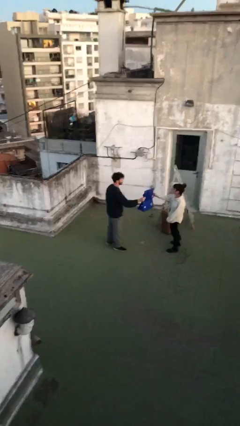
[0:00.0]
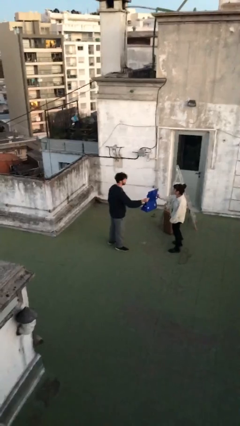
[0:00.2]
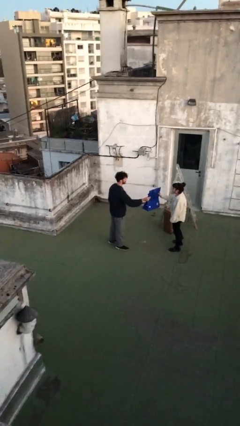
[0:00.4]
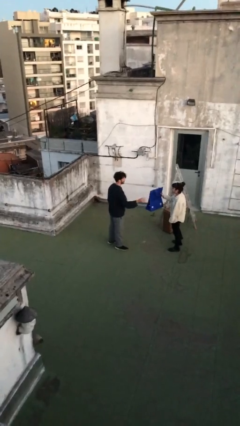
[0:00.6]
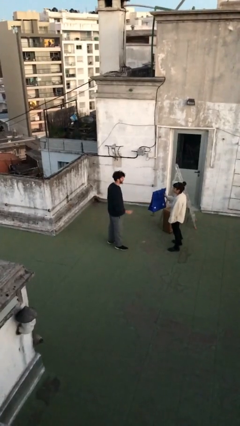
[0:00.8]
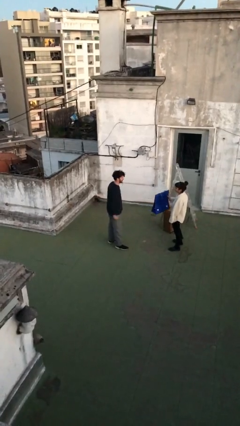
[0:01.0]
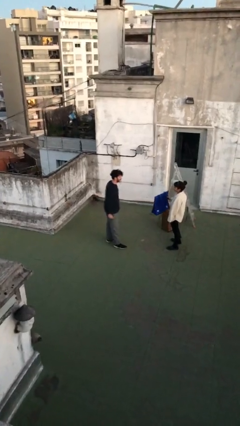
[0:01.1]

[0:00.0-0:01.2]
person transfers object to person

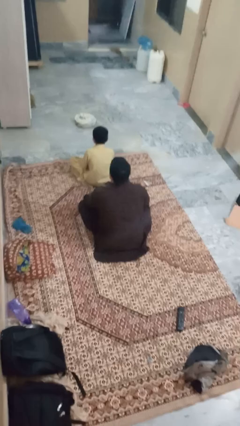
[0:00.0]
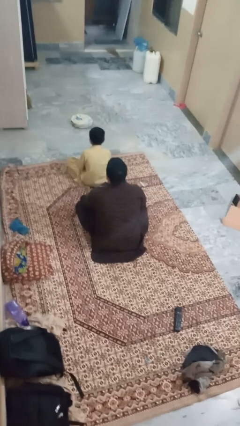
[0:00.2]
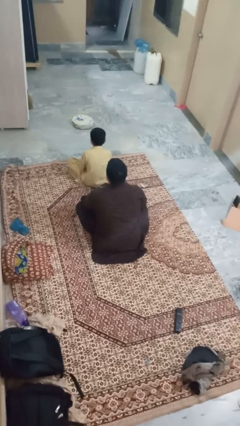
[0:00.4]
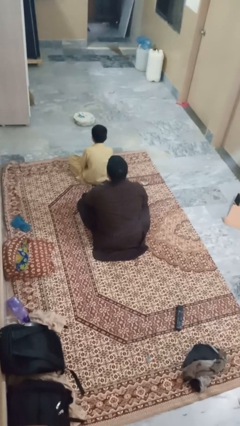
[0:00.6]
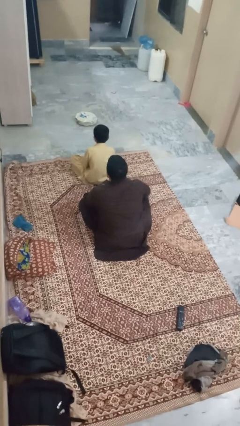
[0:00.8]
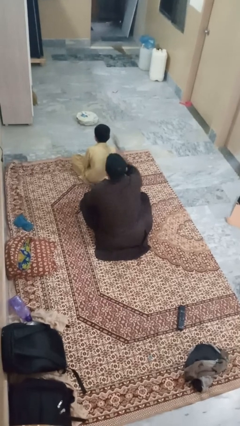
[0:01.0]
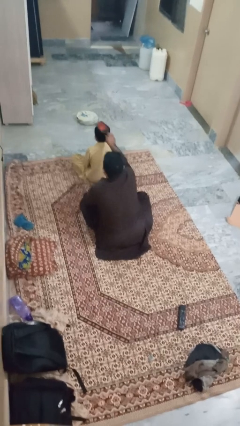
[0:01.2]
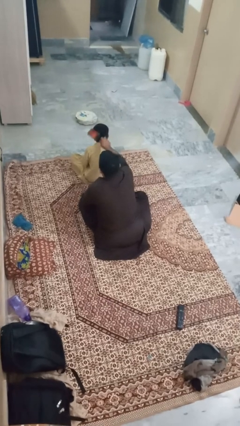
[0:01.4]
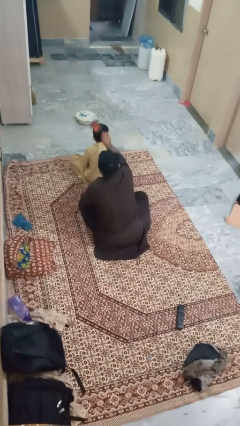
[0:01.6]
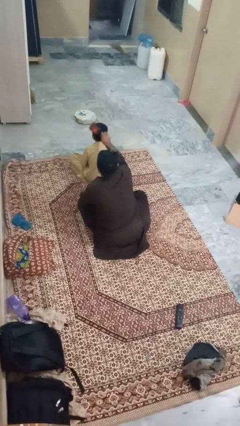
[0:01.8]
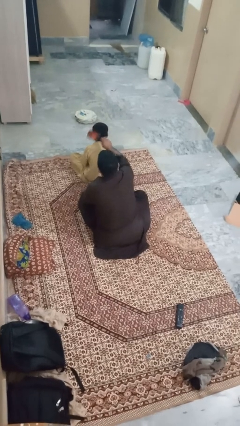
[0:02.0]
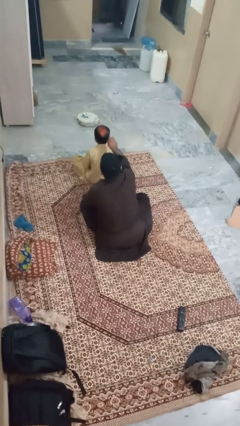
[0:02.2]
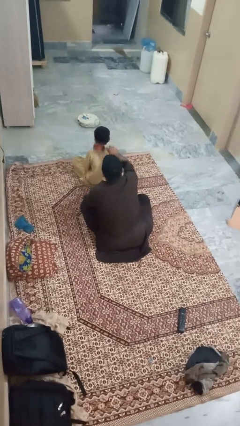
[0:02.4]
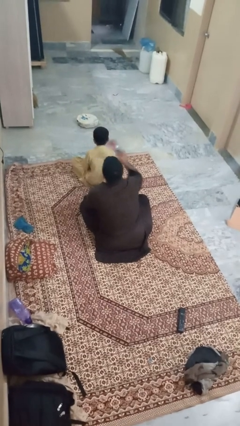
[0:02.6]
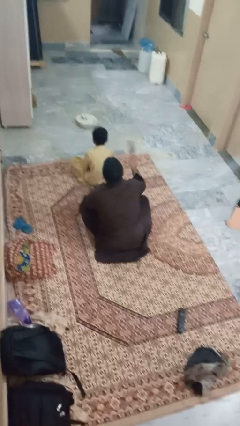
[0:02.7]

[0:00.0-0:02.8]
person brushes hair of person

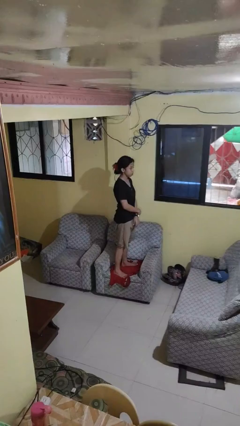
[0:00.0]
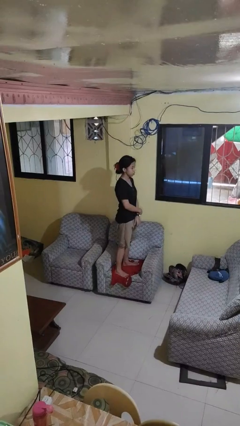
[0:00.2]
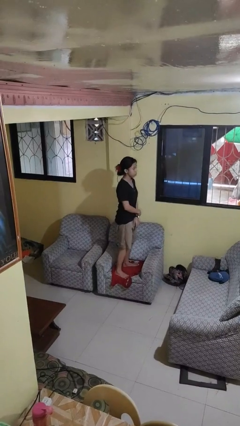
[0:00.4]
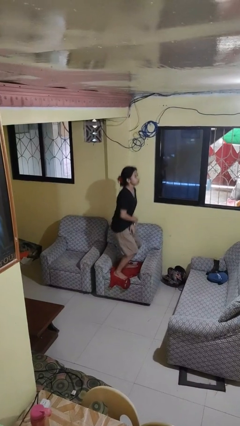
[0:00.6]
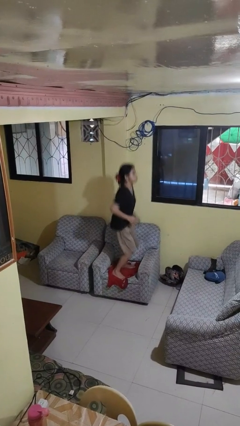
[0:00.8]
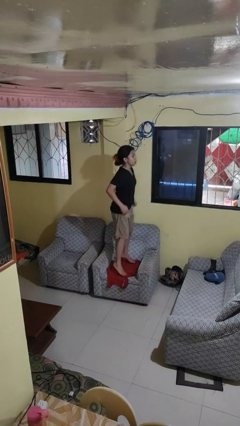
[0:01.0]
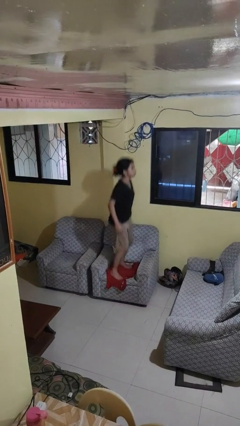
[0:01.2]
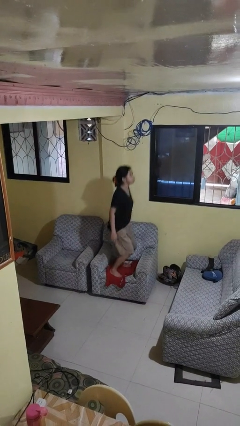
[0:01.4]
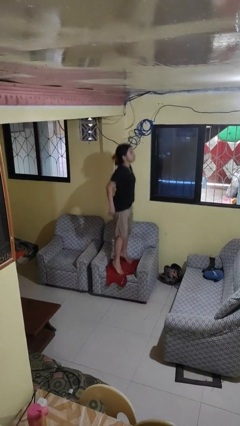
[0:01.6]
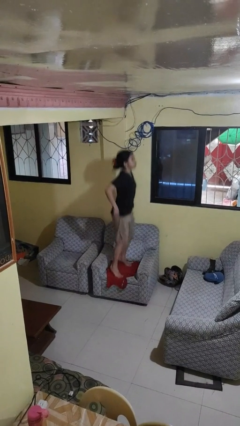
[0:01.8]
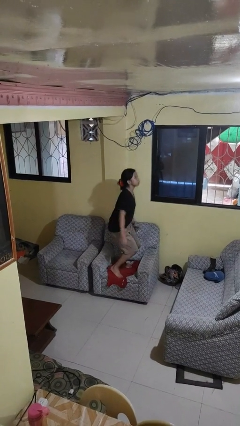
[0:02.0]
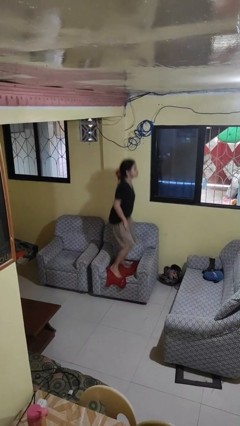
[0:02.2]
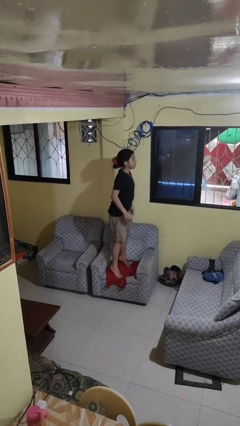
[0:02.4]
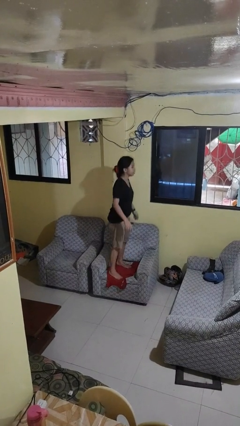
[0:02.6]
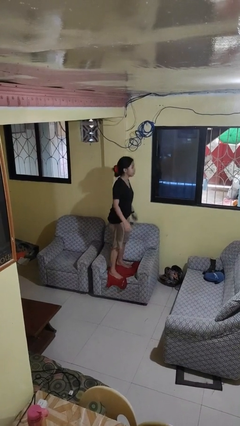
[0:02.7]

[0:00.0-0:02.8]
person jumps on couch

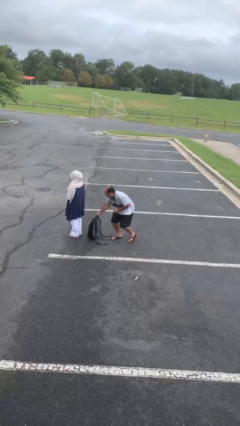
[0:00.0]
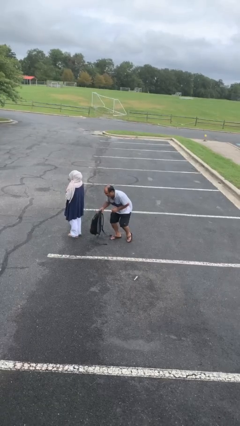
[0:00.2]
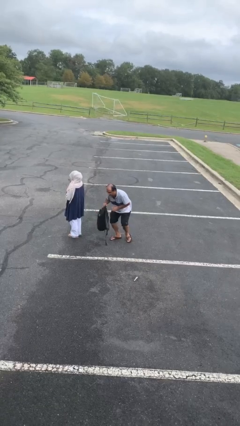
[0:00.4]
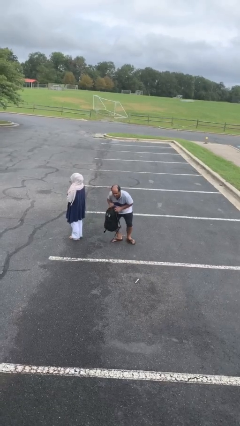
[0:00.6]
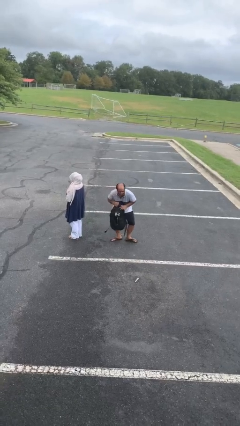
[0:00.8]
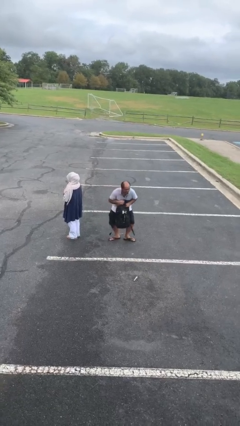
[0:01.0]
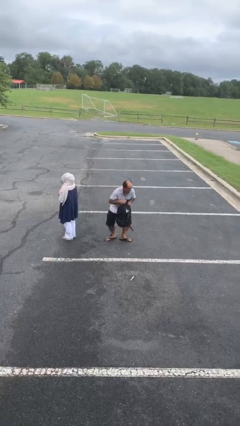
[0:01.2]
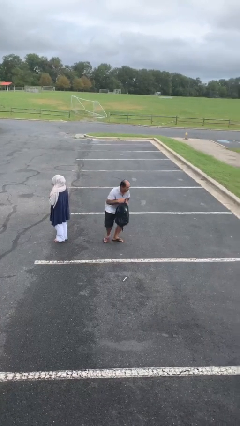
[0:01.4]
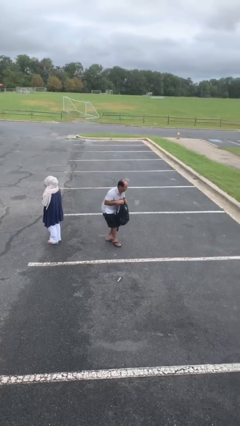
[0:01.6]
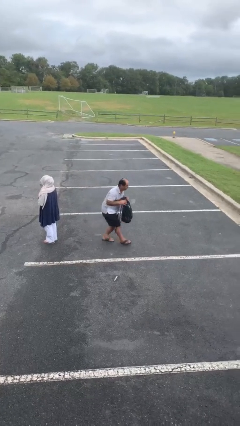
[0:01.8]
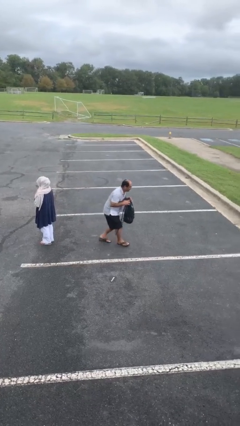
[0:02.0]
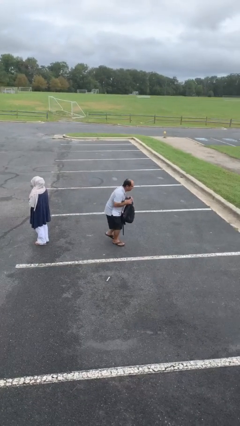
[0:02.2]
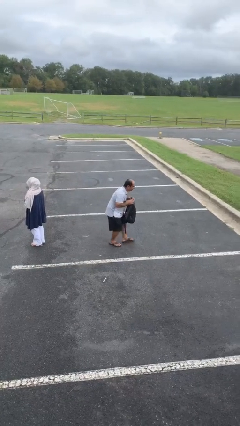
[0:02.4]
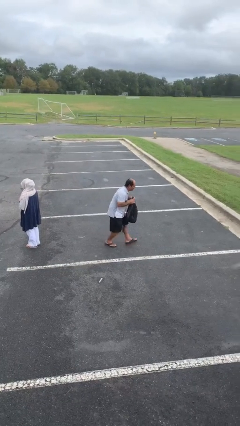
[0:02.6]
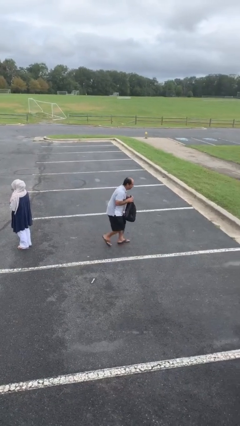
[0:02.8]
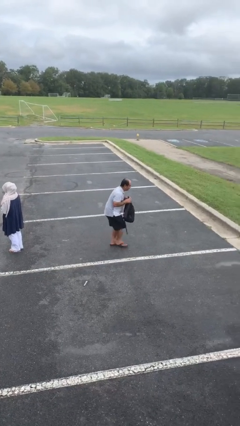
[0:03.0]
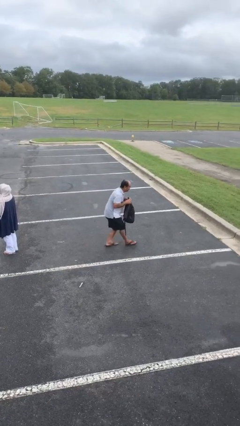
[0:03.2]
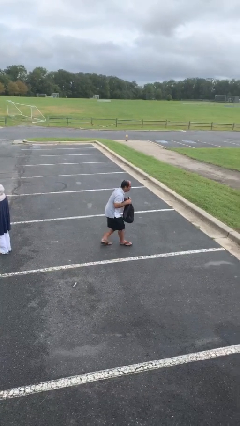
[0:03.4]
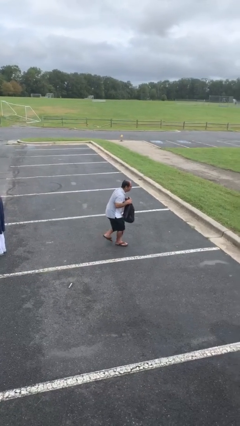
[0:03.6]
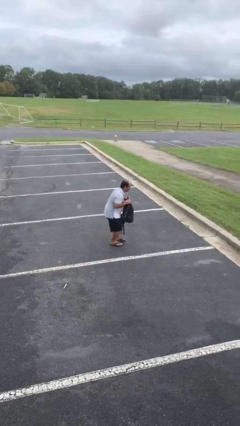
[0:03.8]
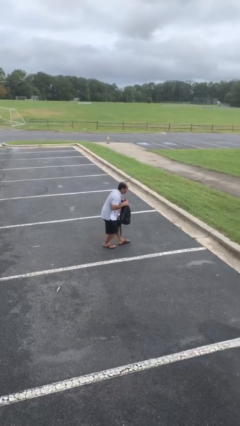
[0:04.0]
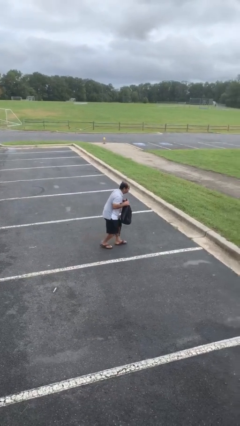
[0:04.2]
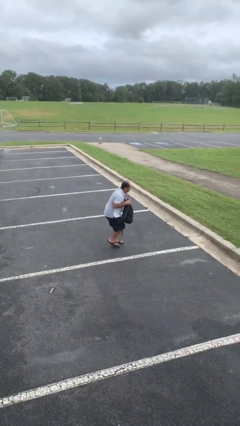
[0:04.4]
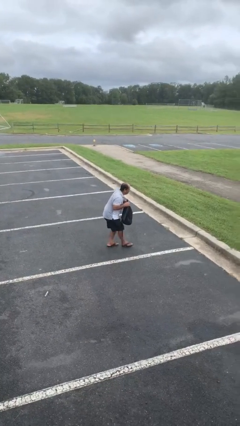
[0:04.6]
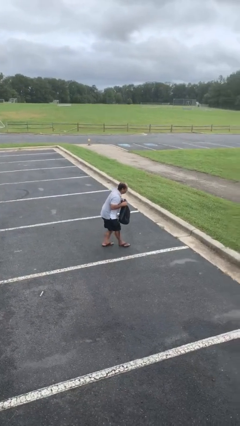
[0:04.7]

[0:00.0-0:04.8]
person steals object from person

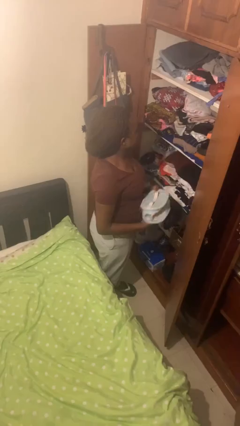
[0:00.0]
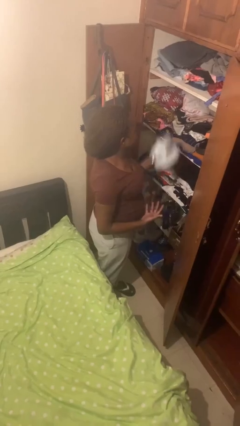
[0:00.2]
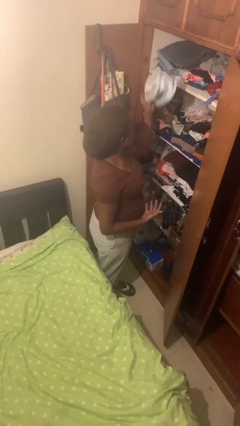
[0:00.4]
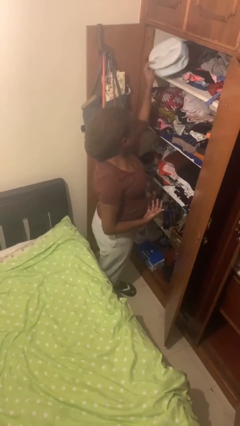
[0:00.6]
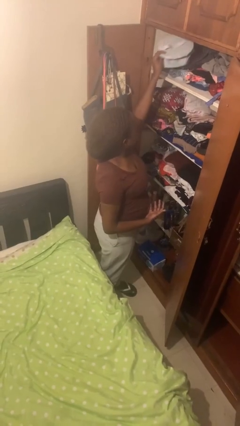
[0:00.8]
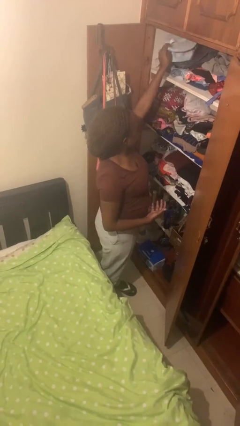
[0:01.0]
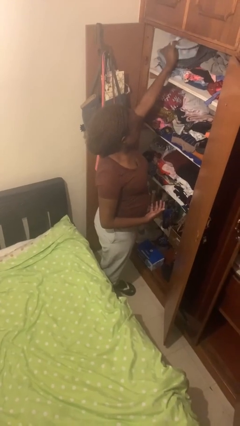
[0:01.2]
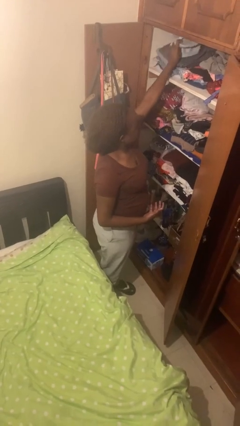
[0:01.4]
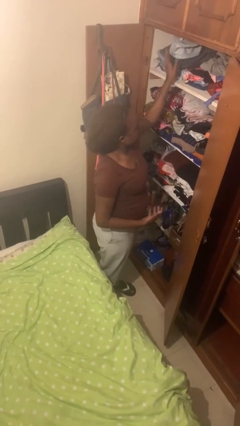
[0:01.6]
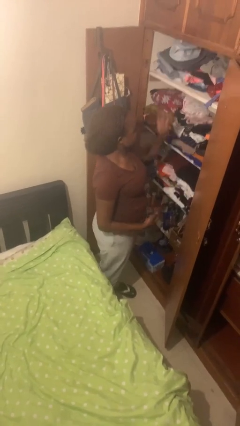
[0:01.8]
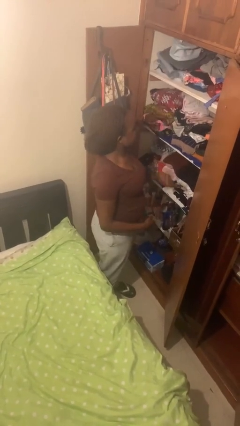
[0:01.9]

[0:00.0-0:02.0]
person puts down object on shelf

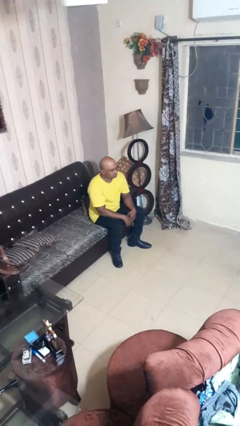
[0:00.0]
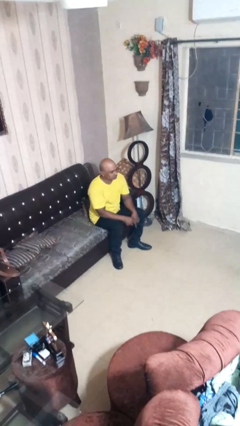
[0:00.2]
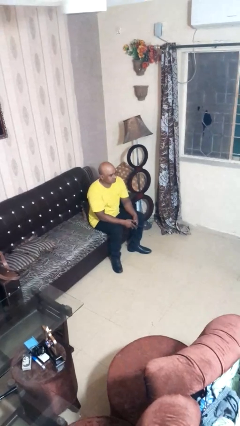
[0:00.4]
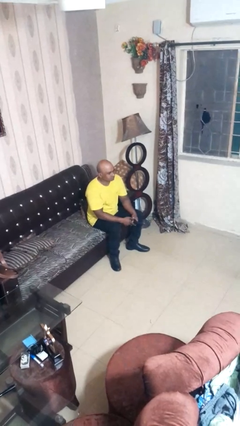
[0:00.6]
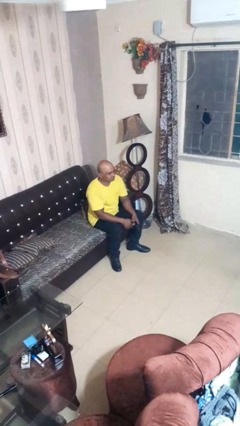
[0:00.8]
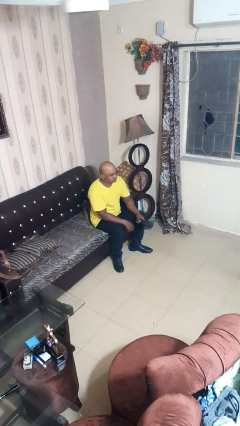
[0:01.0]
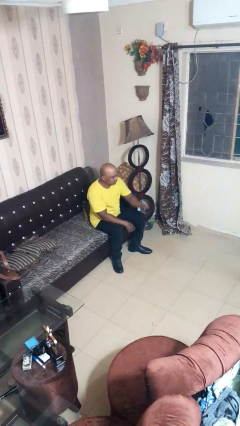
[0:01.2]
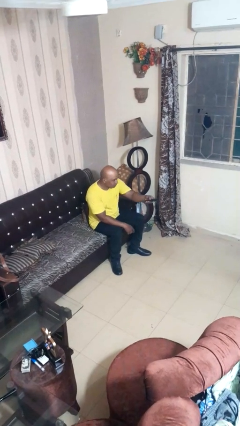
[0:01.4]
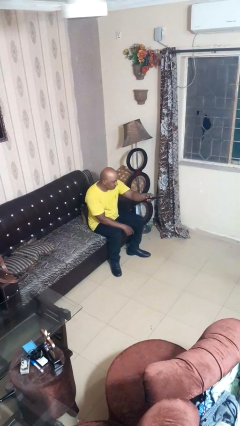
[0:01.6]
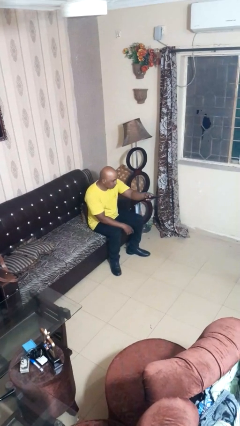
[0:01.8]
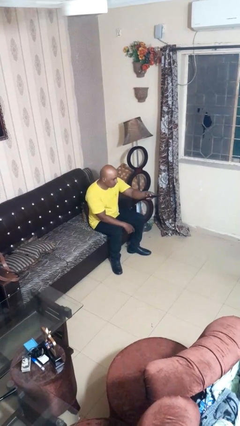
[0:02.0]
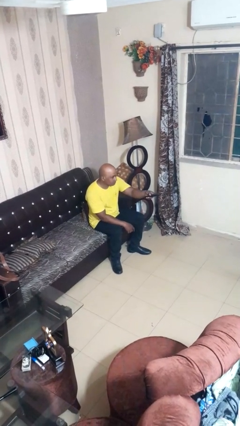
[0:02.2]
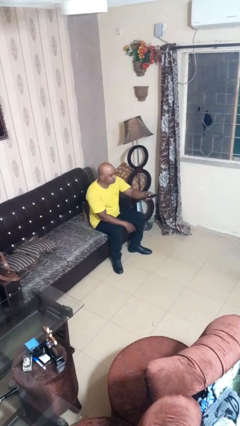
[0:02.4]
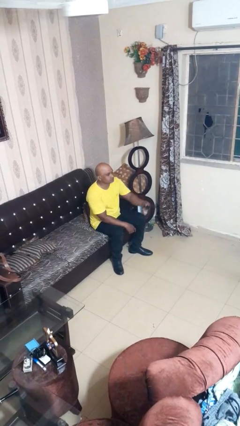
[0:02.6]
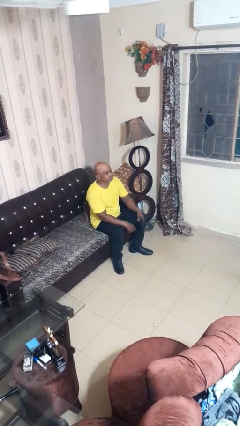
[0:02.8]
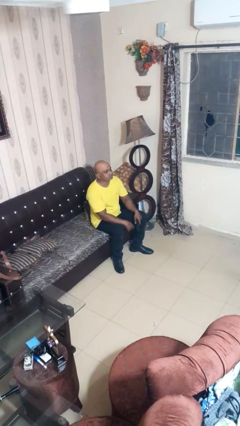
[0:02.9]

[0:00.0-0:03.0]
person uses television remote

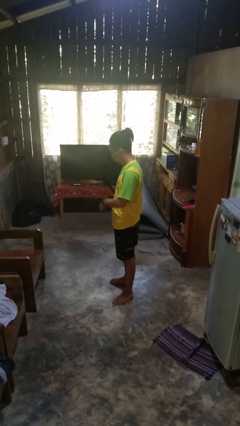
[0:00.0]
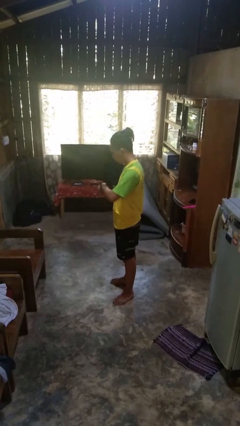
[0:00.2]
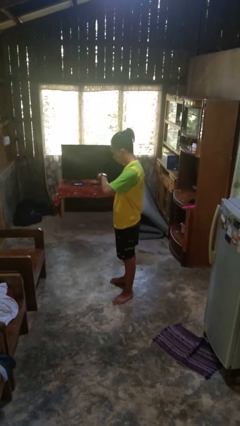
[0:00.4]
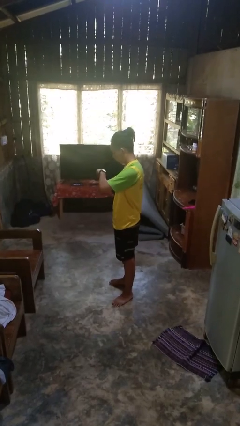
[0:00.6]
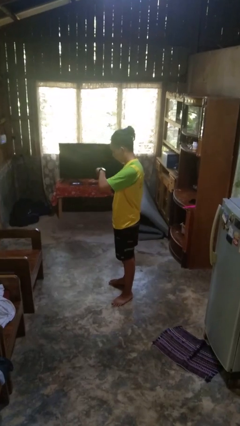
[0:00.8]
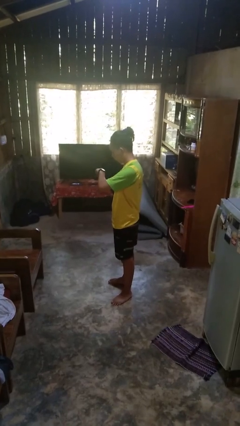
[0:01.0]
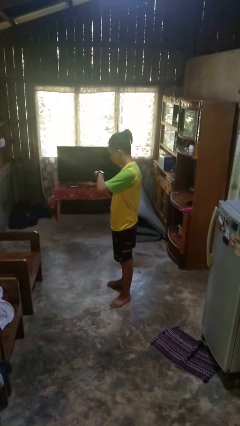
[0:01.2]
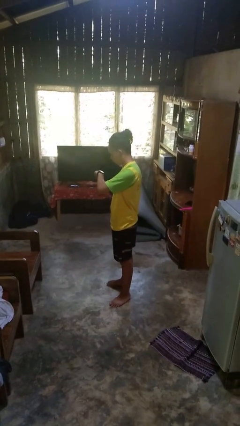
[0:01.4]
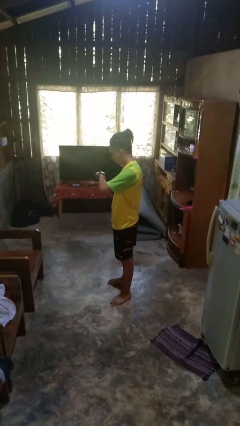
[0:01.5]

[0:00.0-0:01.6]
person looks at wristwatch
